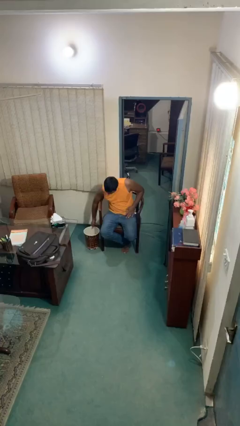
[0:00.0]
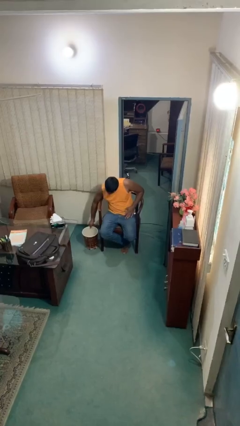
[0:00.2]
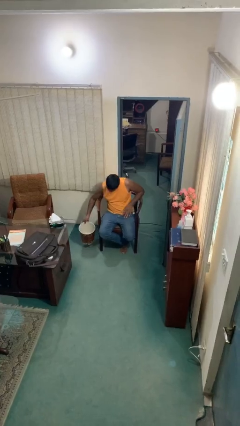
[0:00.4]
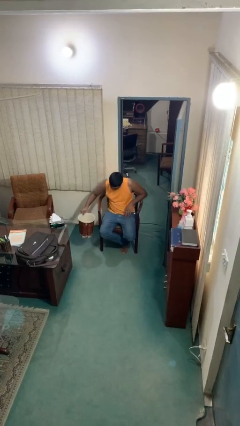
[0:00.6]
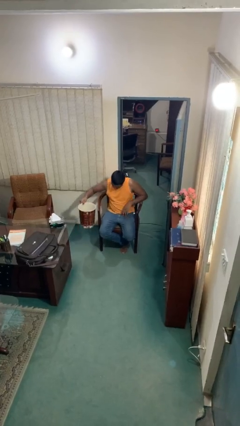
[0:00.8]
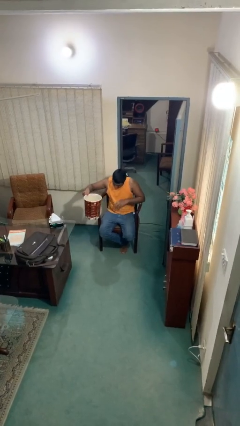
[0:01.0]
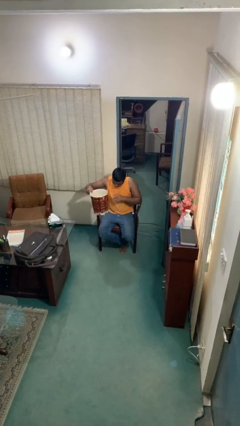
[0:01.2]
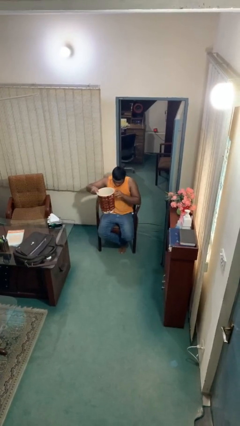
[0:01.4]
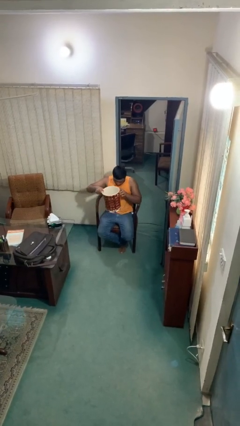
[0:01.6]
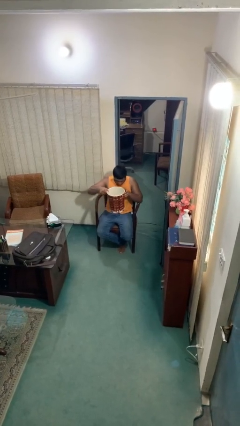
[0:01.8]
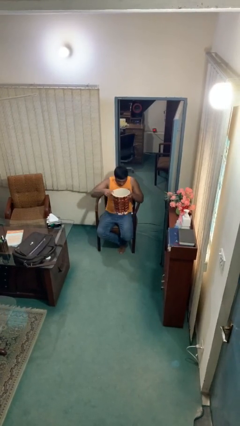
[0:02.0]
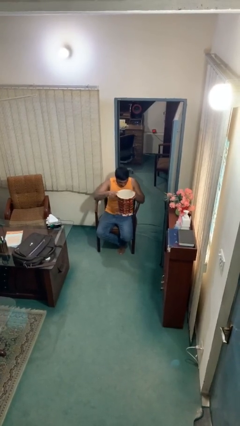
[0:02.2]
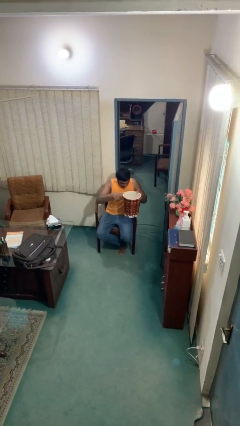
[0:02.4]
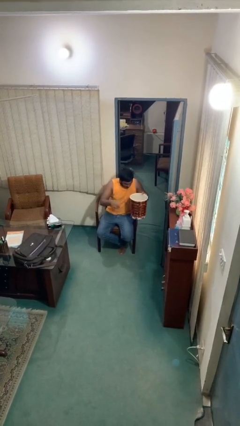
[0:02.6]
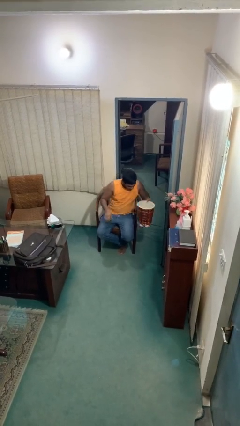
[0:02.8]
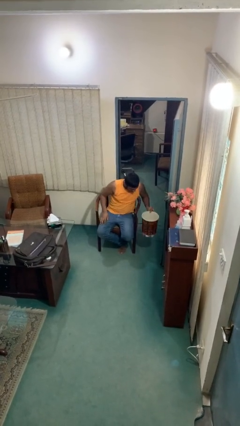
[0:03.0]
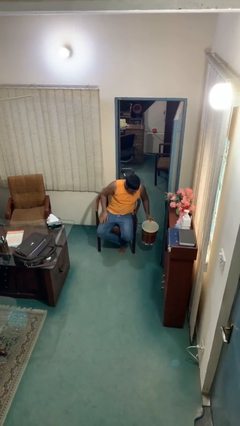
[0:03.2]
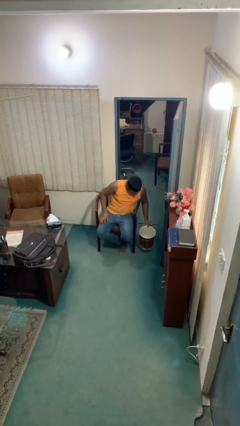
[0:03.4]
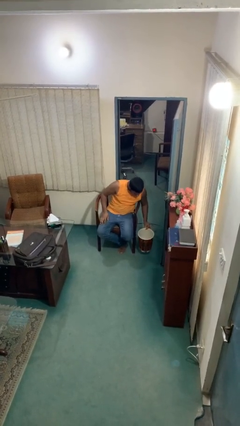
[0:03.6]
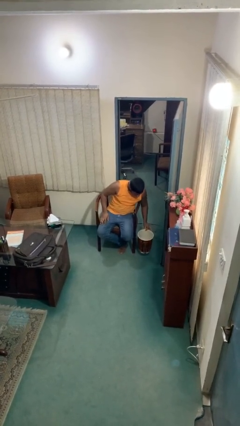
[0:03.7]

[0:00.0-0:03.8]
person picks up object from floor

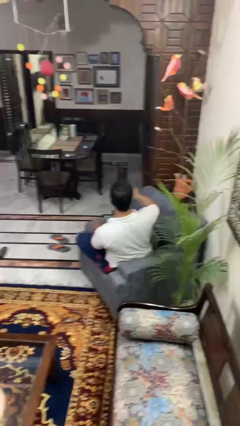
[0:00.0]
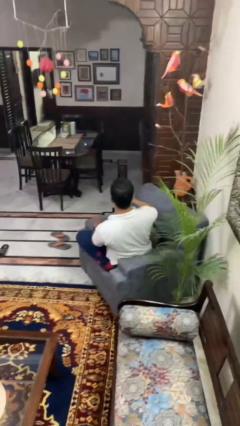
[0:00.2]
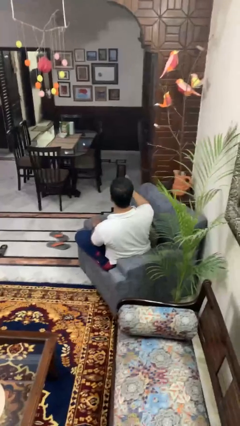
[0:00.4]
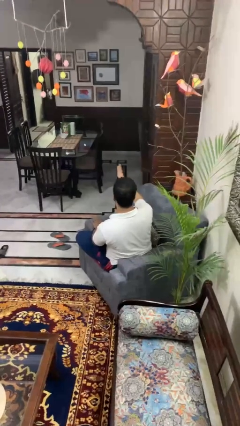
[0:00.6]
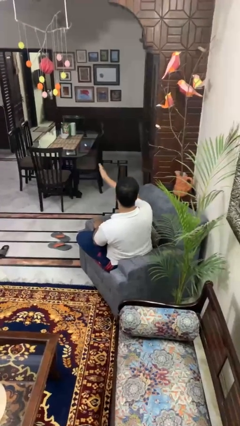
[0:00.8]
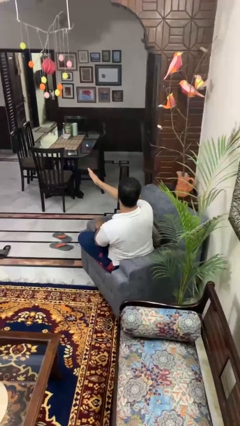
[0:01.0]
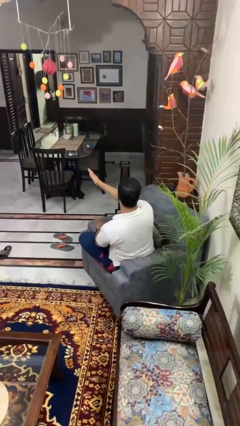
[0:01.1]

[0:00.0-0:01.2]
person gestures swipe left

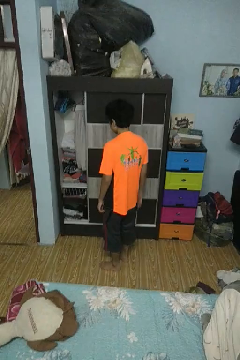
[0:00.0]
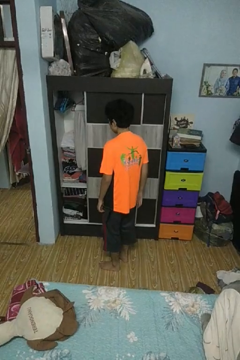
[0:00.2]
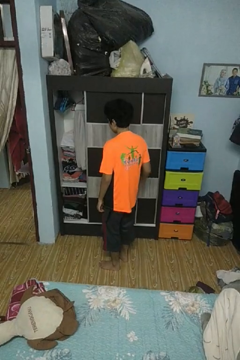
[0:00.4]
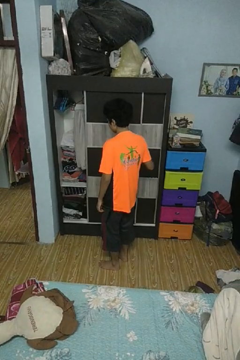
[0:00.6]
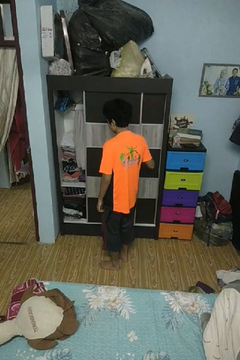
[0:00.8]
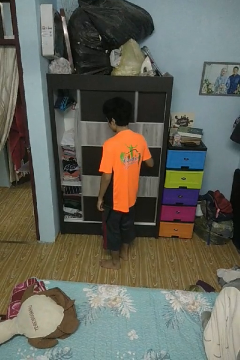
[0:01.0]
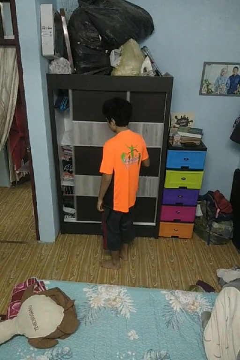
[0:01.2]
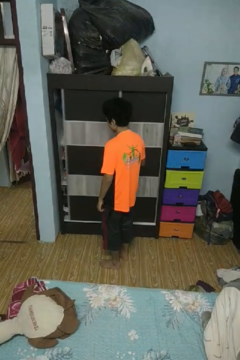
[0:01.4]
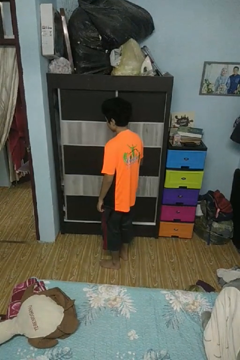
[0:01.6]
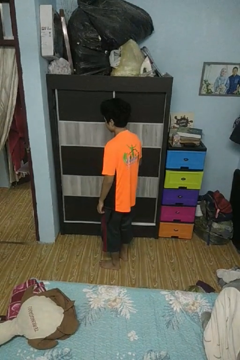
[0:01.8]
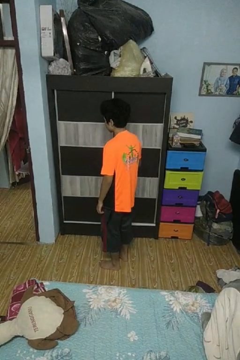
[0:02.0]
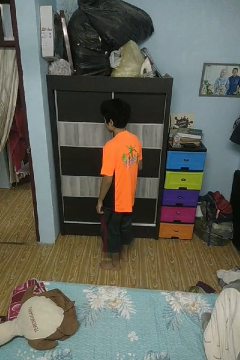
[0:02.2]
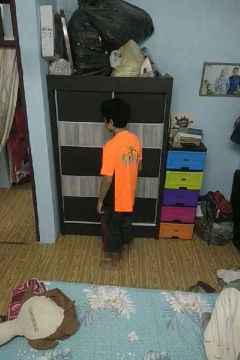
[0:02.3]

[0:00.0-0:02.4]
person closes closet door

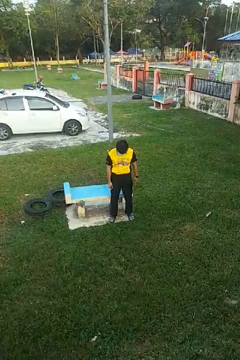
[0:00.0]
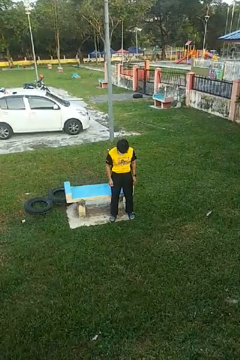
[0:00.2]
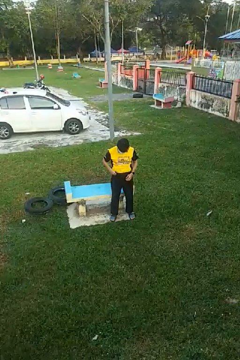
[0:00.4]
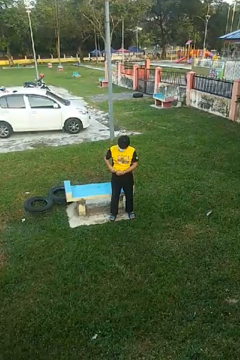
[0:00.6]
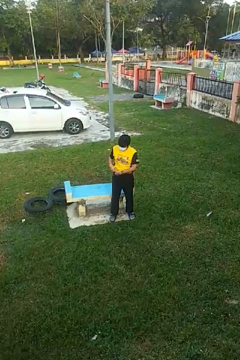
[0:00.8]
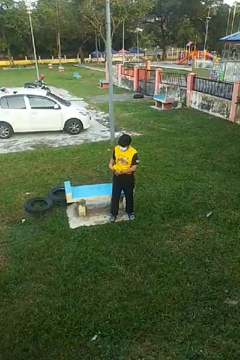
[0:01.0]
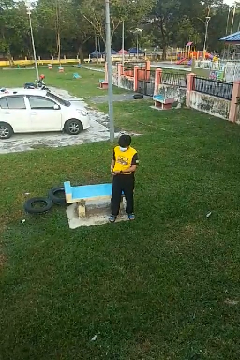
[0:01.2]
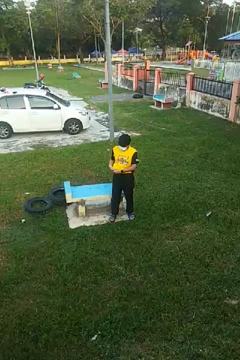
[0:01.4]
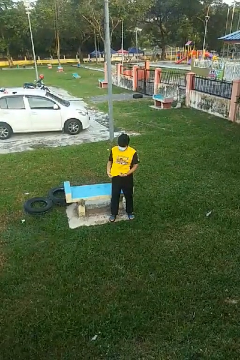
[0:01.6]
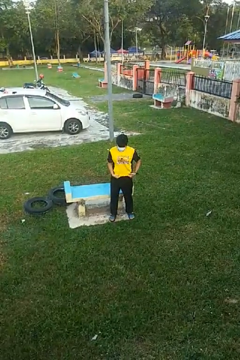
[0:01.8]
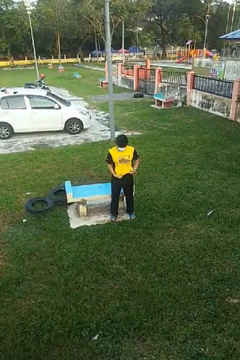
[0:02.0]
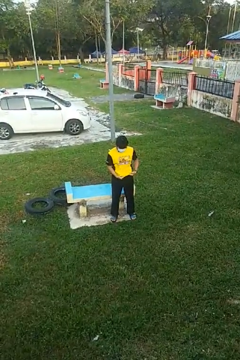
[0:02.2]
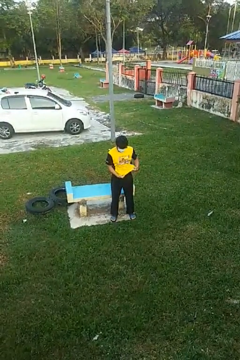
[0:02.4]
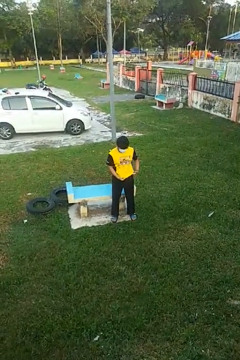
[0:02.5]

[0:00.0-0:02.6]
person untucks shirt

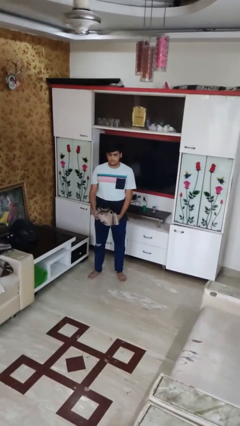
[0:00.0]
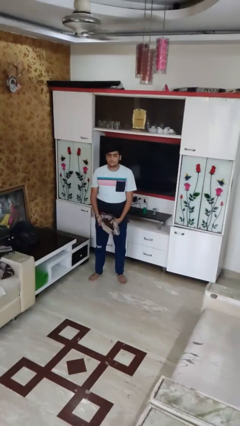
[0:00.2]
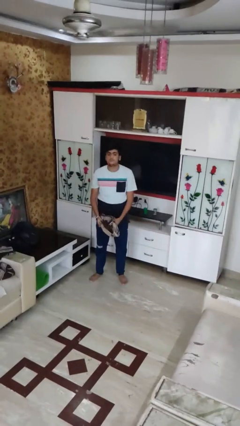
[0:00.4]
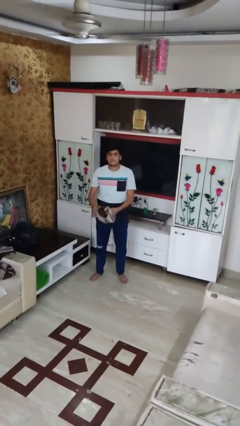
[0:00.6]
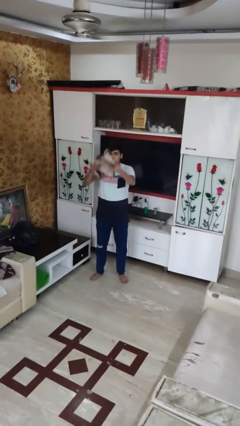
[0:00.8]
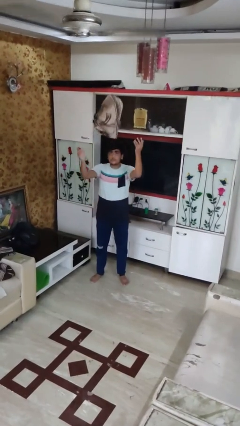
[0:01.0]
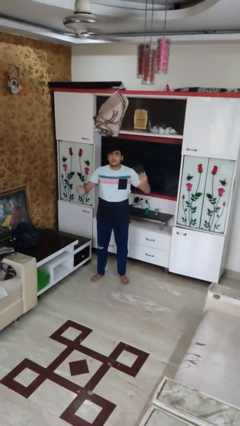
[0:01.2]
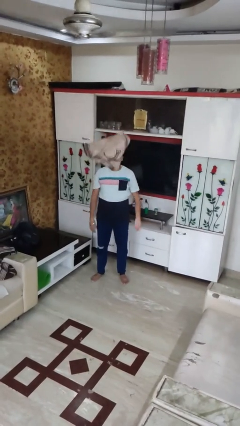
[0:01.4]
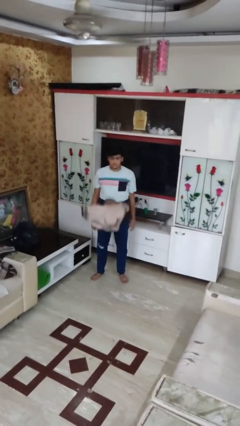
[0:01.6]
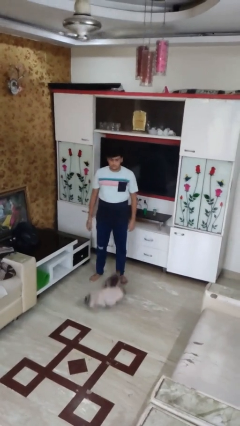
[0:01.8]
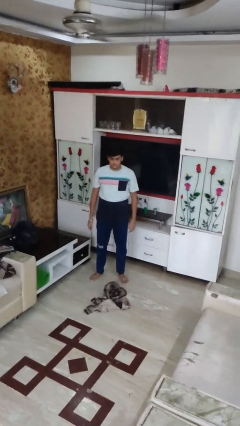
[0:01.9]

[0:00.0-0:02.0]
person throws object into air

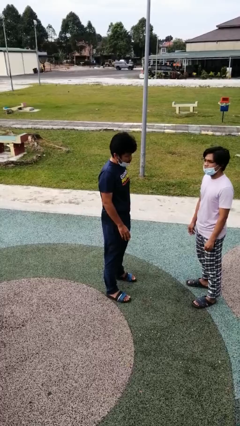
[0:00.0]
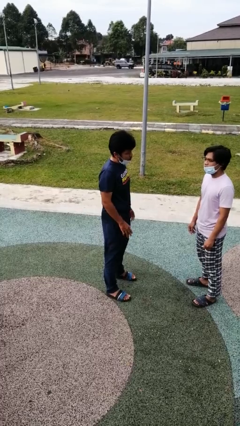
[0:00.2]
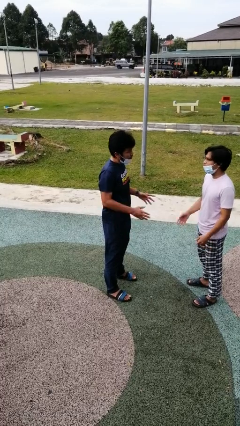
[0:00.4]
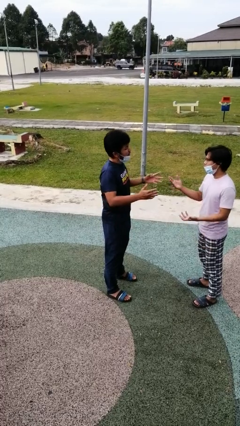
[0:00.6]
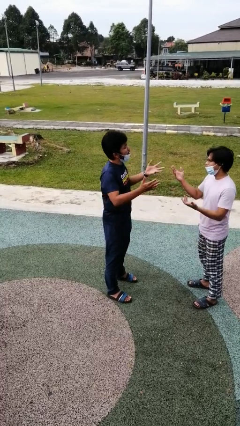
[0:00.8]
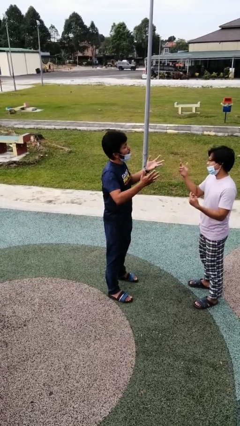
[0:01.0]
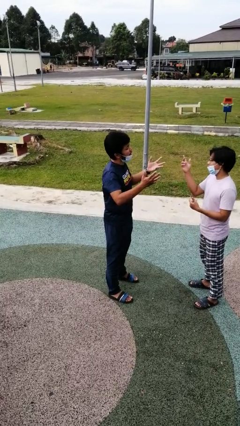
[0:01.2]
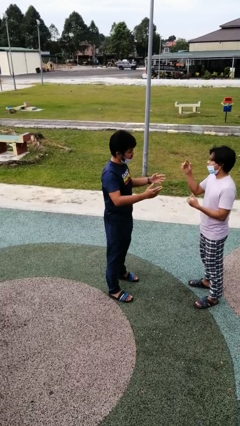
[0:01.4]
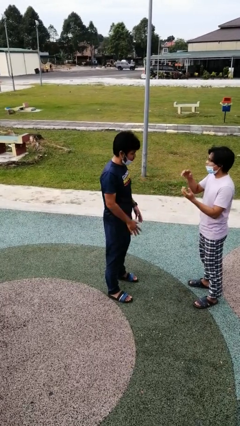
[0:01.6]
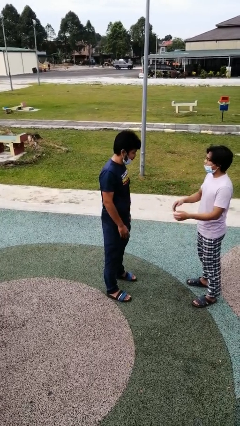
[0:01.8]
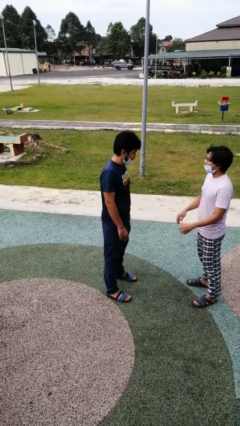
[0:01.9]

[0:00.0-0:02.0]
person talks to person

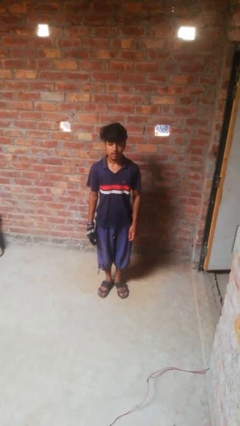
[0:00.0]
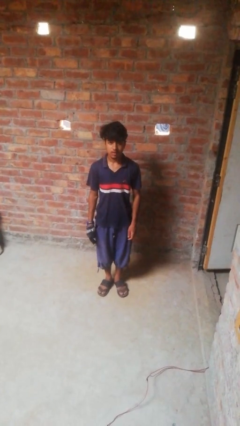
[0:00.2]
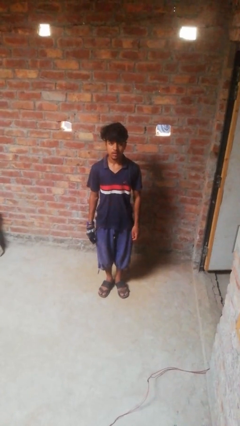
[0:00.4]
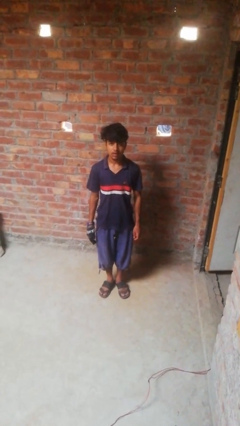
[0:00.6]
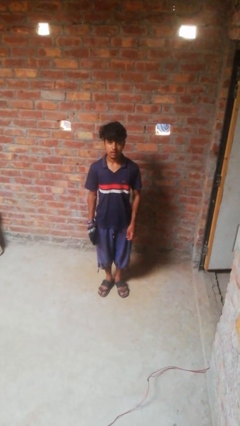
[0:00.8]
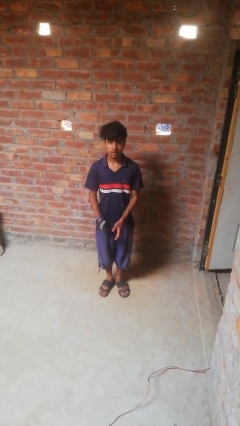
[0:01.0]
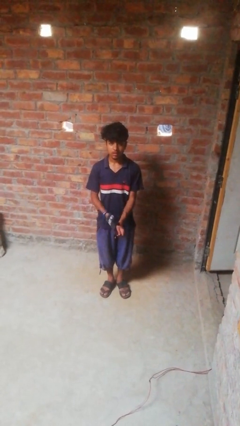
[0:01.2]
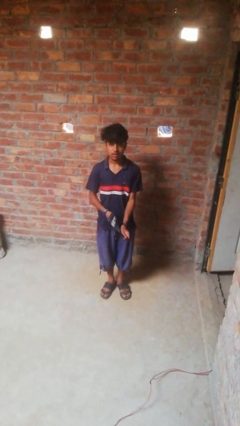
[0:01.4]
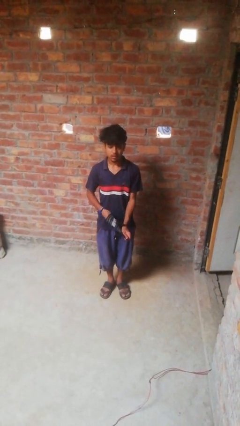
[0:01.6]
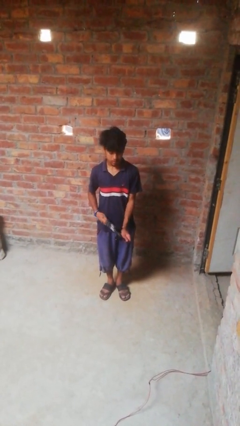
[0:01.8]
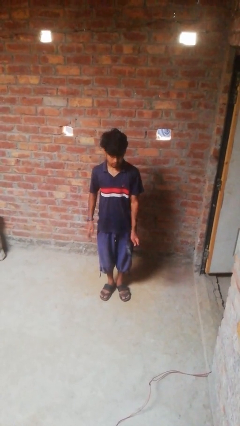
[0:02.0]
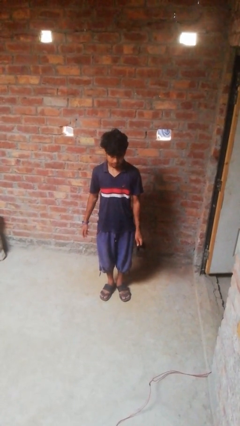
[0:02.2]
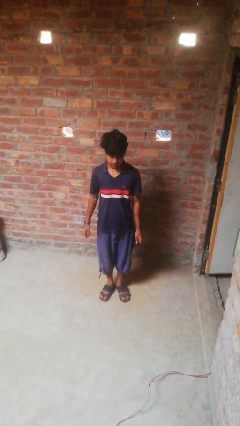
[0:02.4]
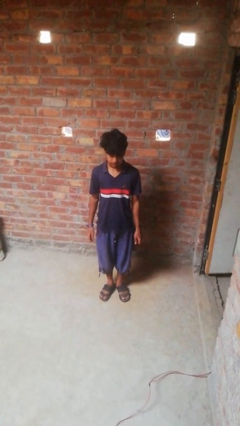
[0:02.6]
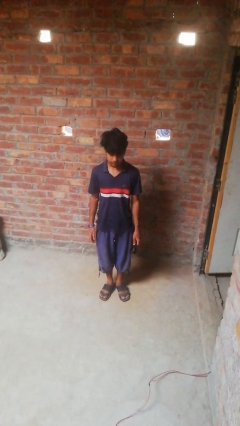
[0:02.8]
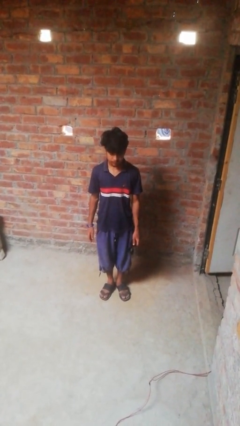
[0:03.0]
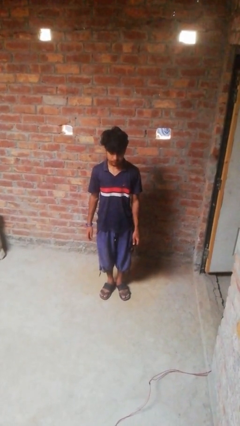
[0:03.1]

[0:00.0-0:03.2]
person takes off gloves

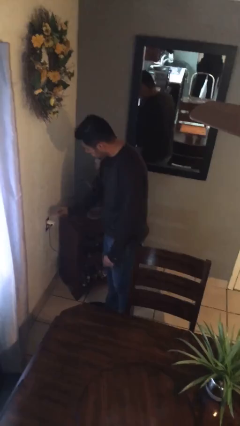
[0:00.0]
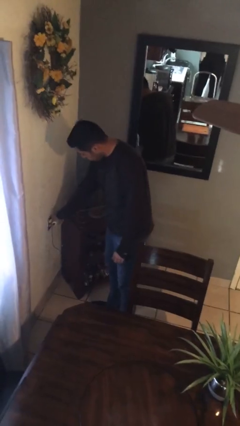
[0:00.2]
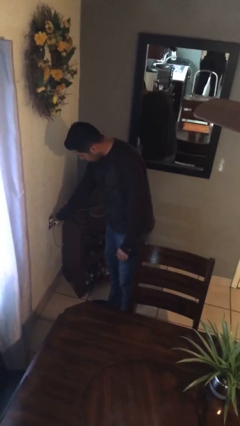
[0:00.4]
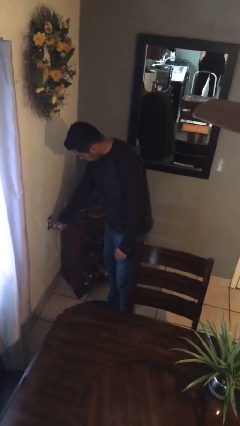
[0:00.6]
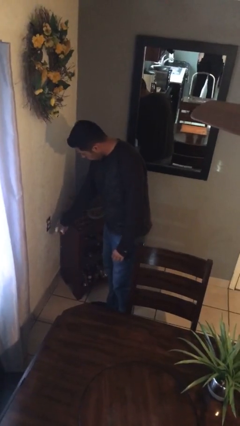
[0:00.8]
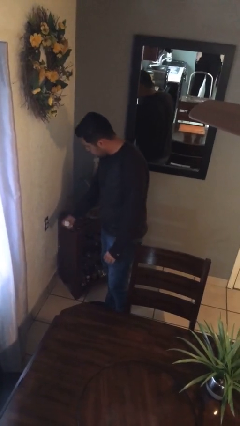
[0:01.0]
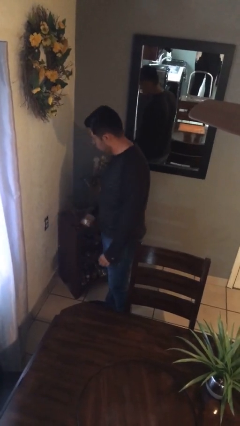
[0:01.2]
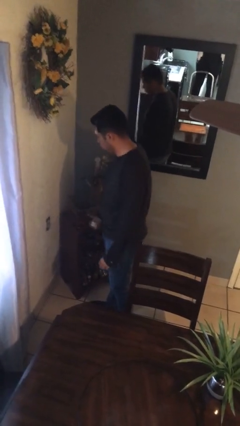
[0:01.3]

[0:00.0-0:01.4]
person pulls wheeled trashcan
